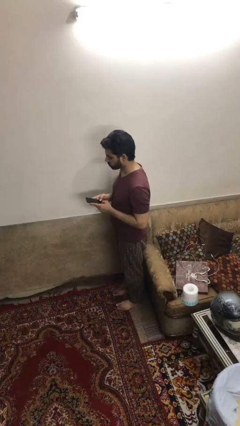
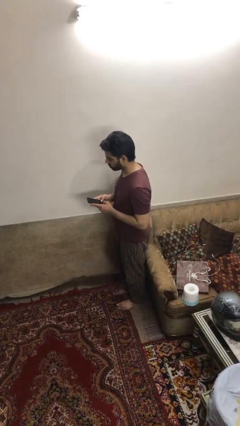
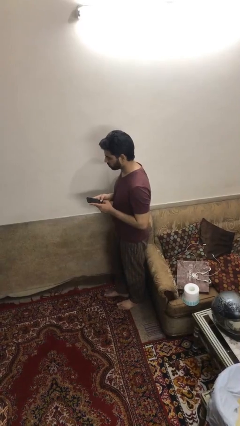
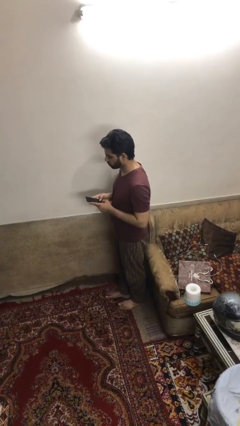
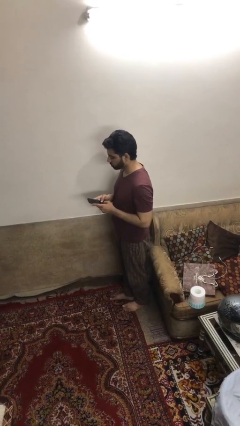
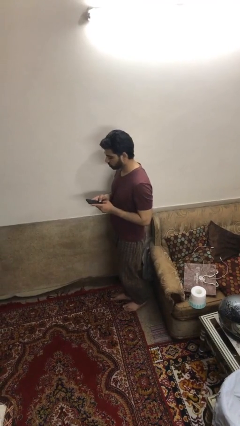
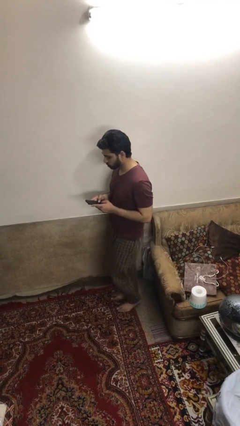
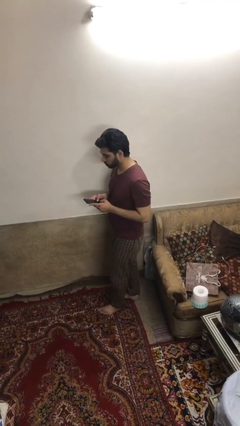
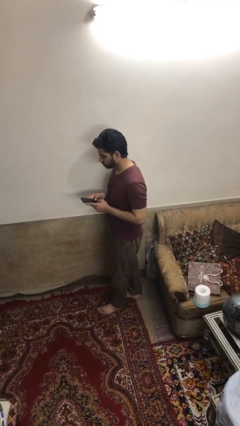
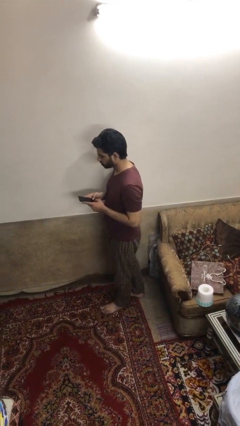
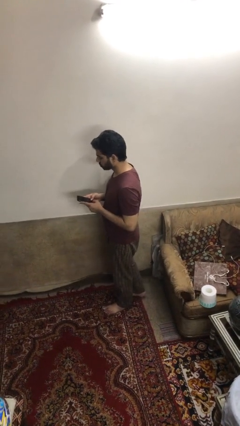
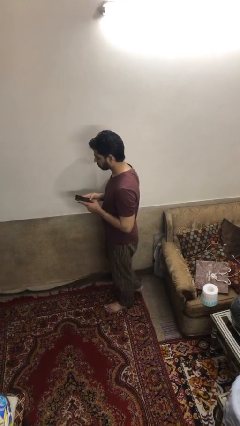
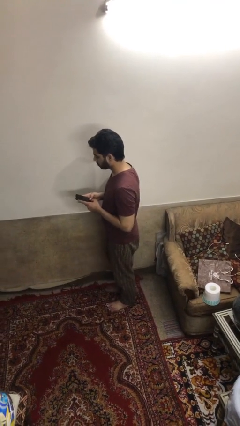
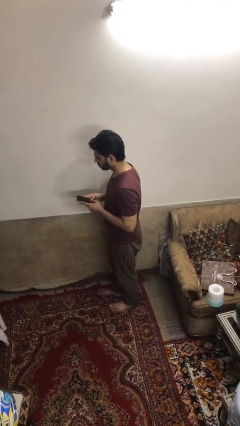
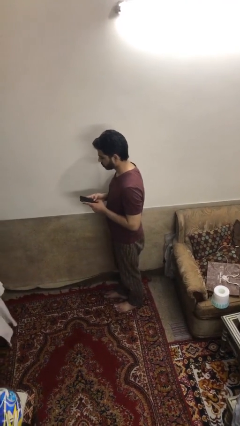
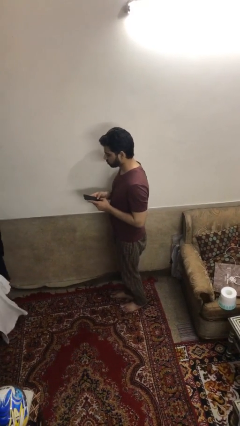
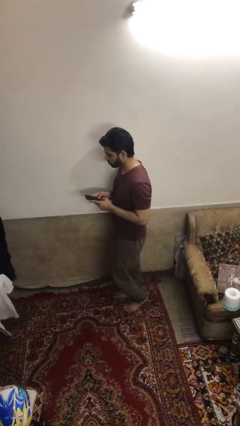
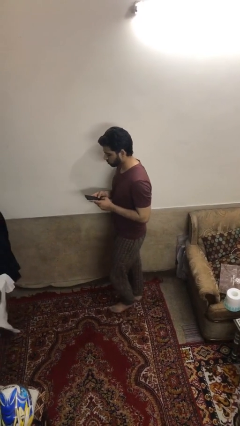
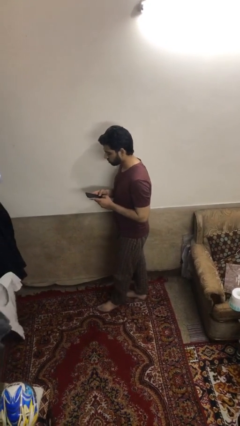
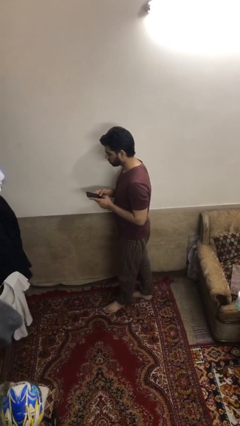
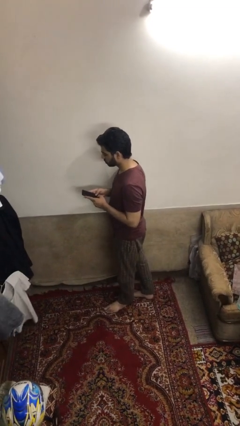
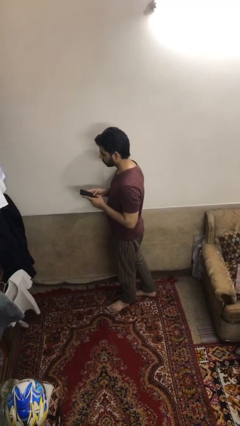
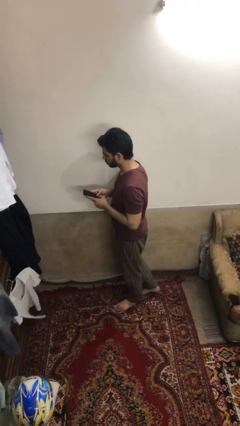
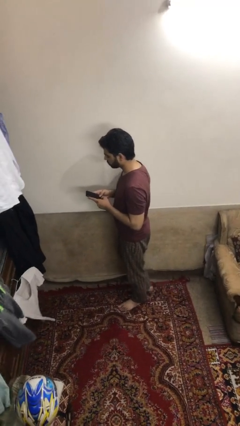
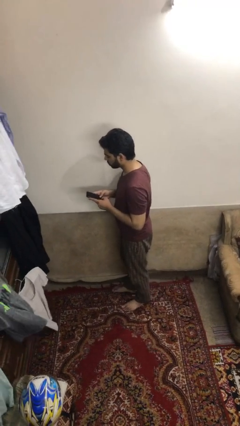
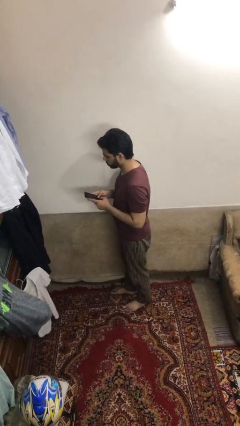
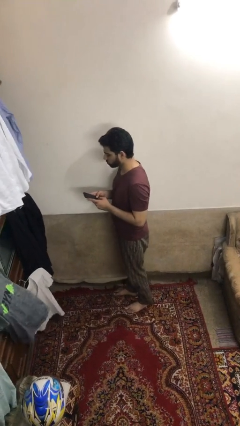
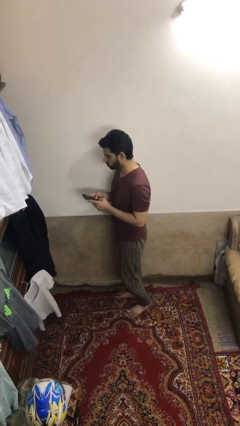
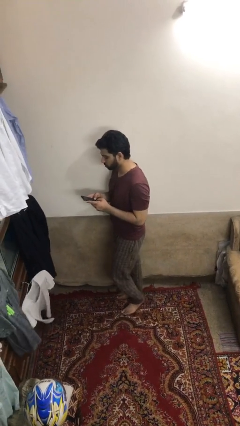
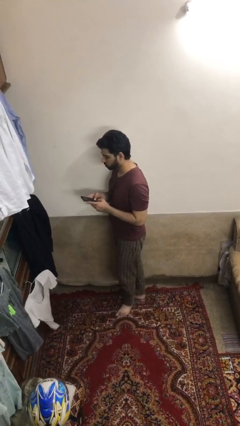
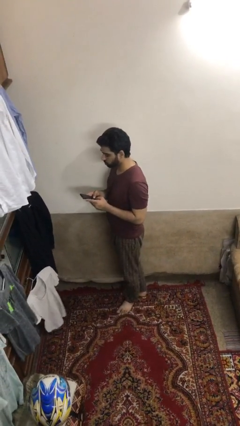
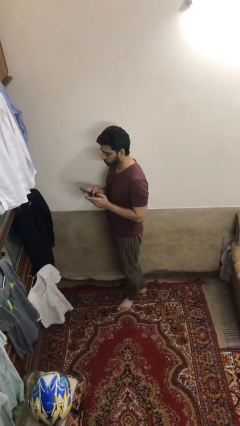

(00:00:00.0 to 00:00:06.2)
person texts on phone

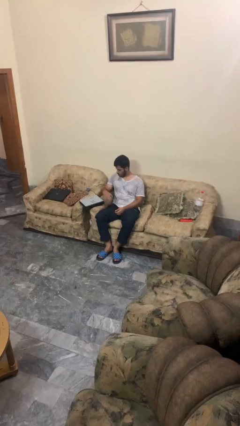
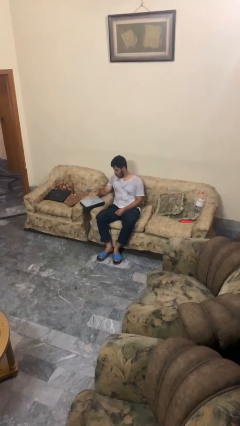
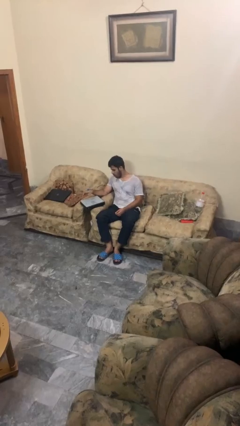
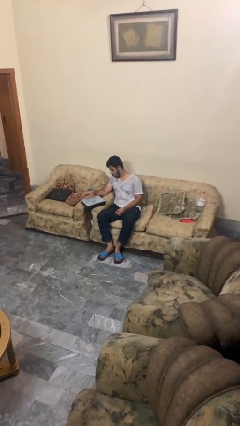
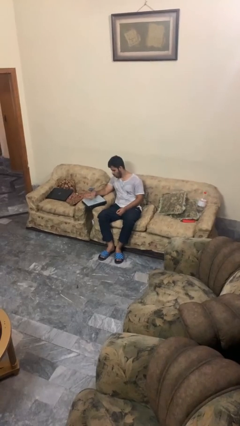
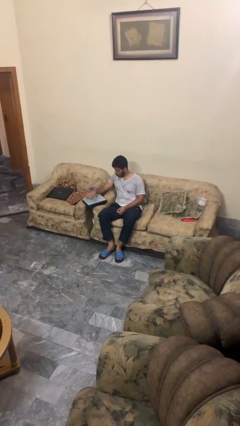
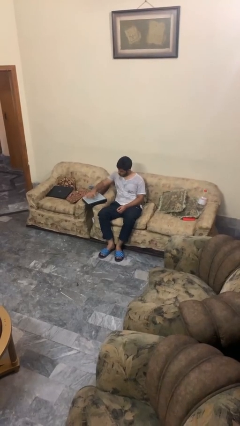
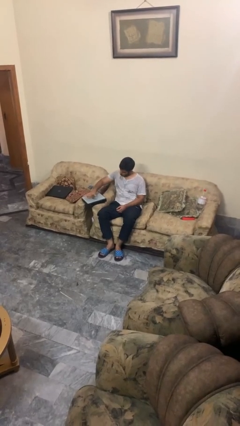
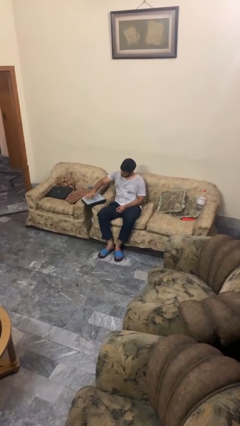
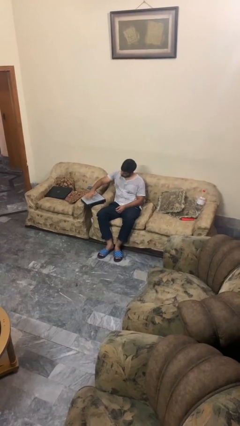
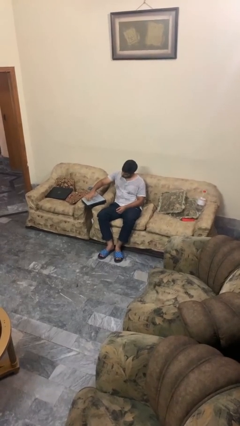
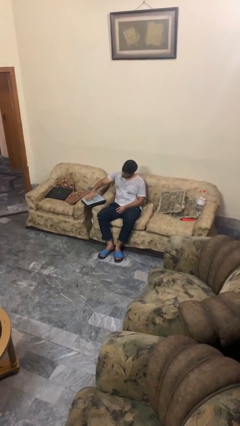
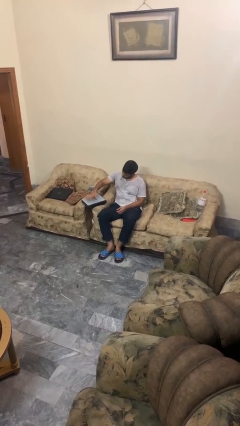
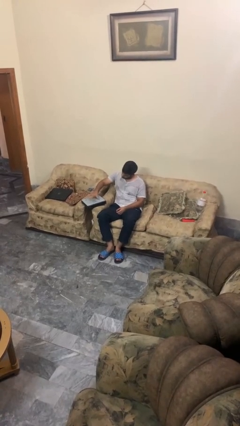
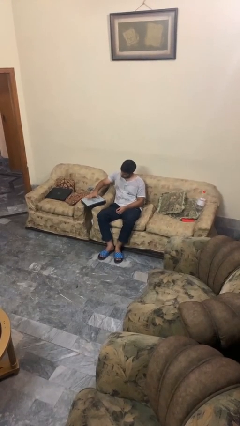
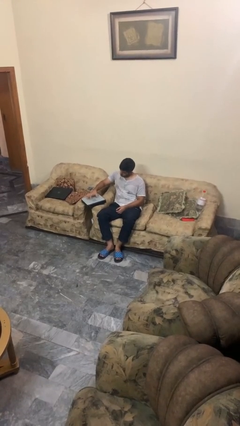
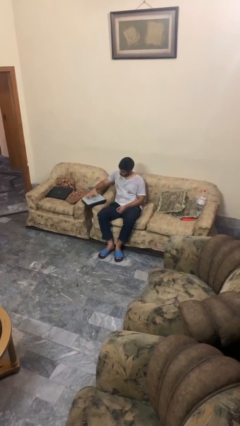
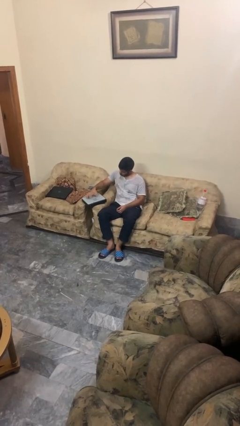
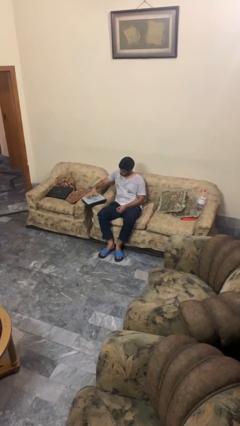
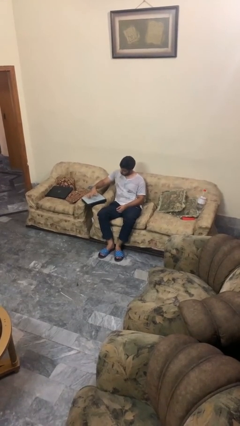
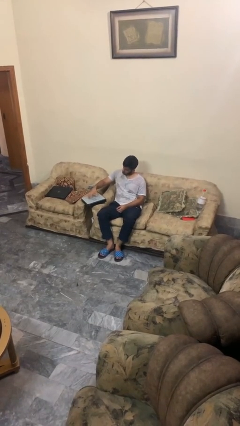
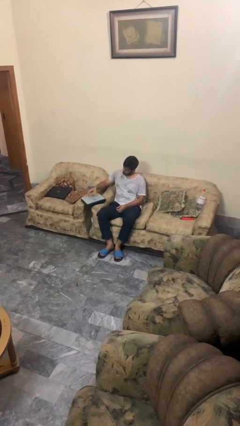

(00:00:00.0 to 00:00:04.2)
person taps object with finger

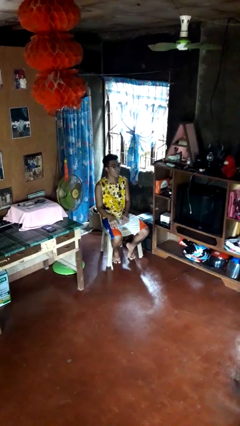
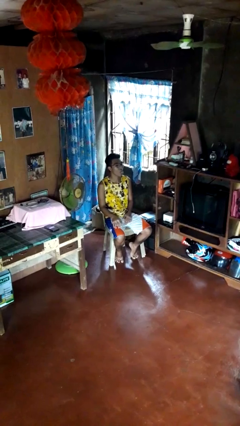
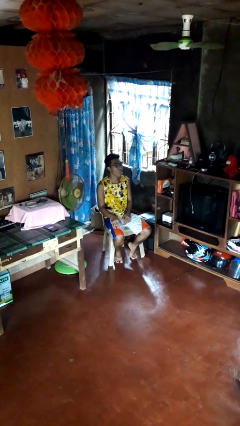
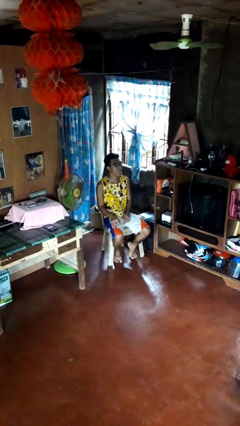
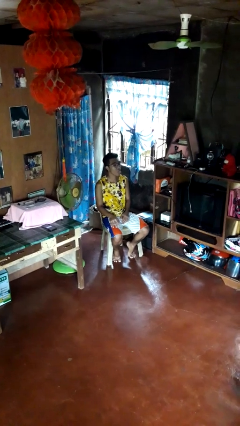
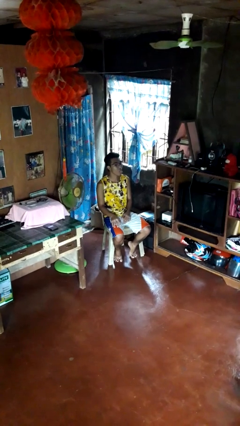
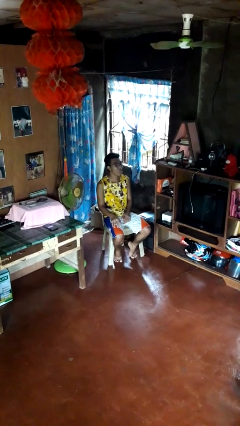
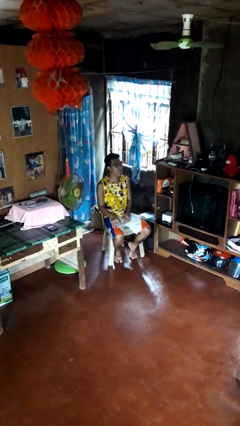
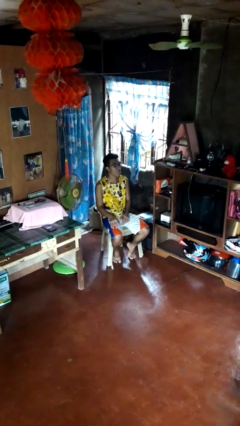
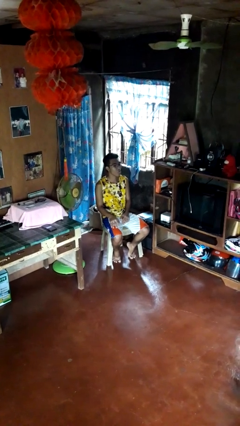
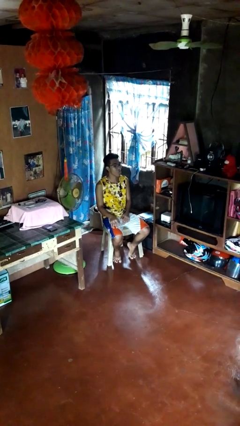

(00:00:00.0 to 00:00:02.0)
person sticks out tongue

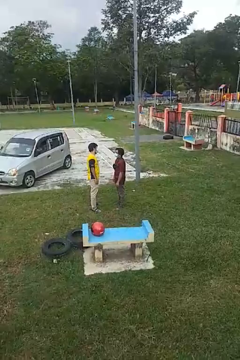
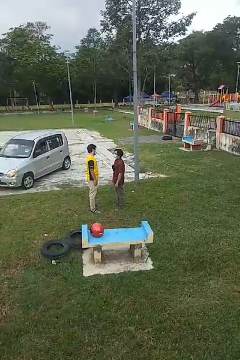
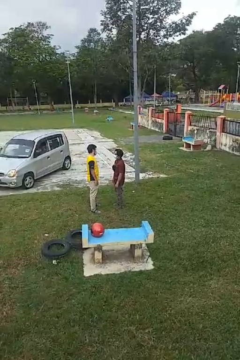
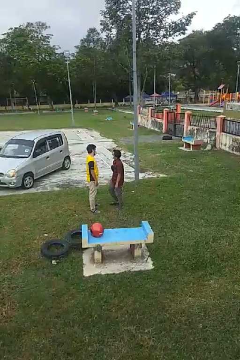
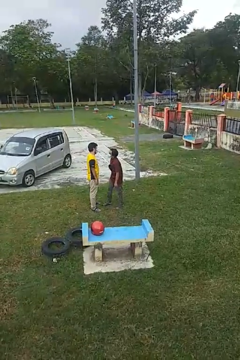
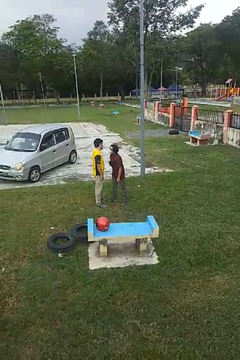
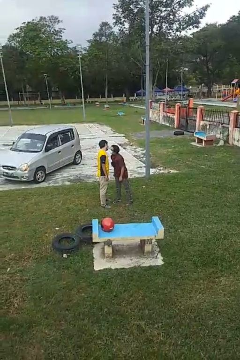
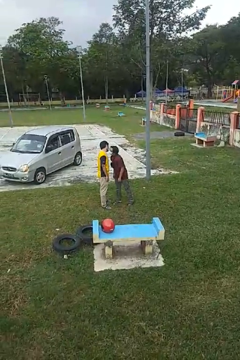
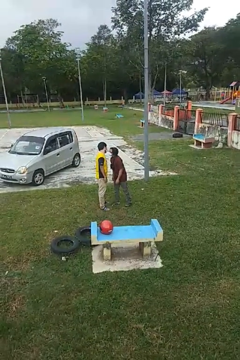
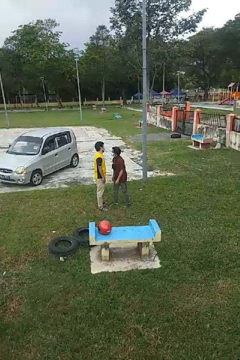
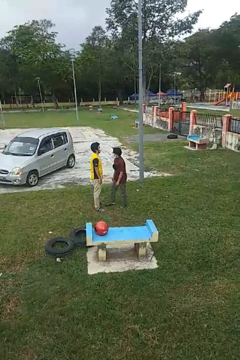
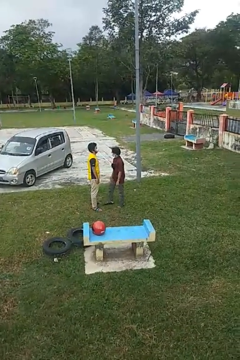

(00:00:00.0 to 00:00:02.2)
person kisses cheek of person

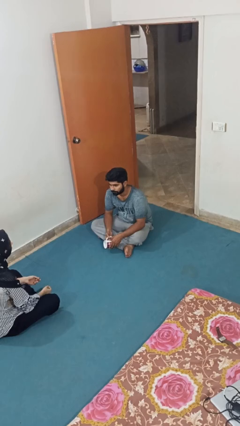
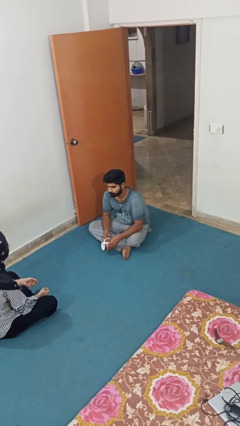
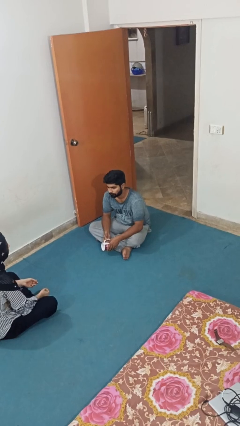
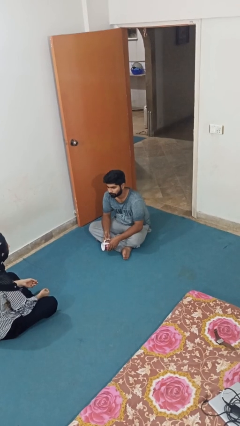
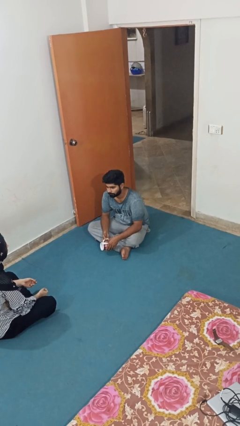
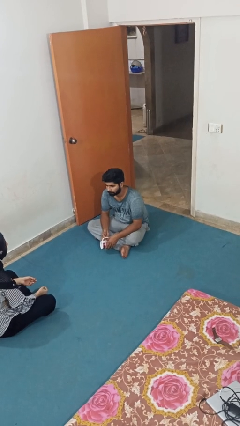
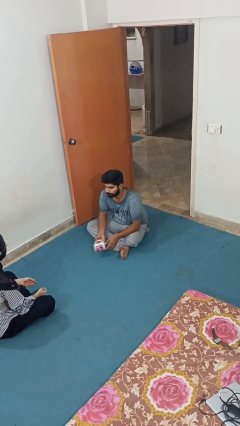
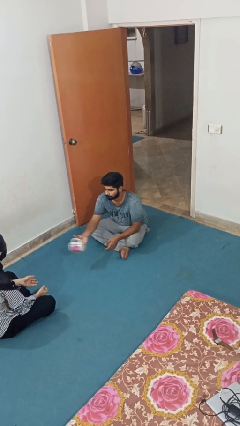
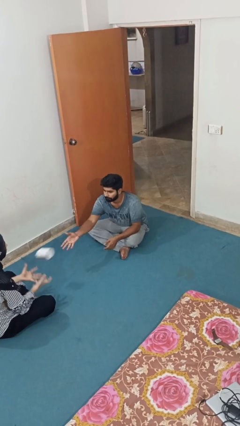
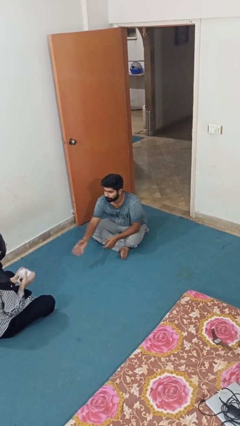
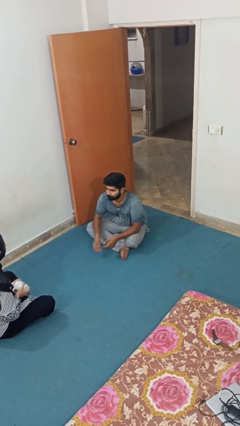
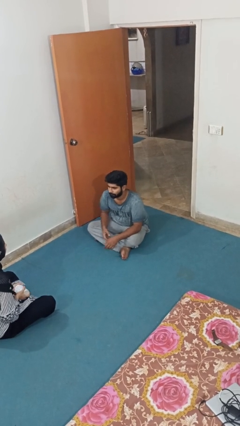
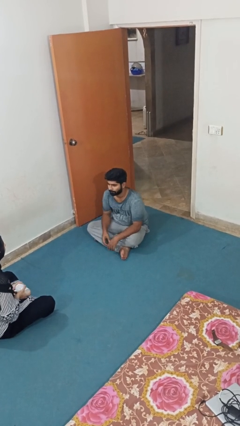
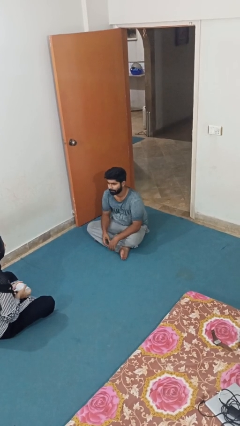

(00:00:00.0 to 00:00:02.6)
person throws object to person

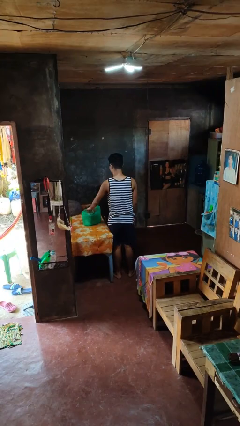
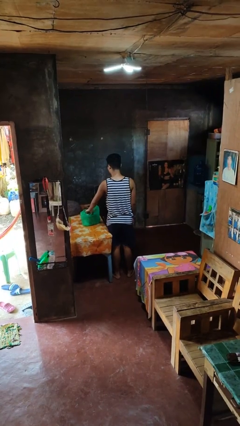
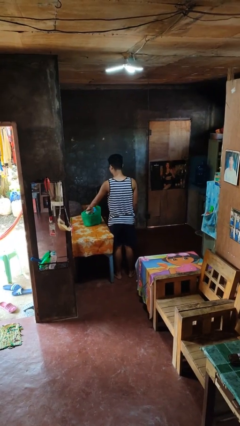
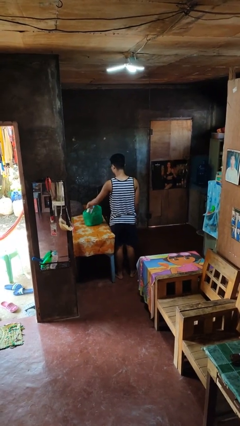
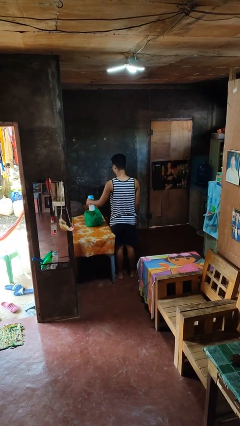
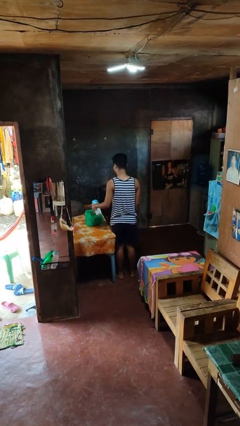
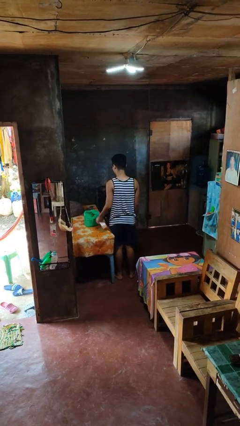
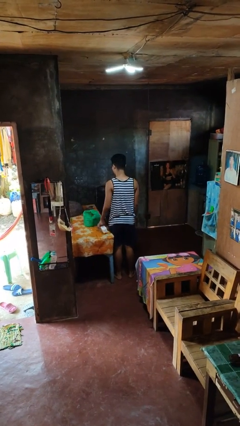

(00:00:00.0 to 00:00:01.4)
person takes object from bag
